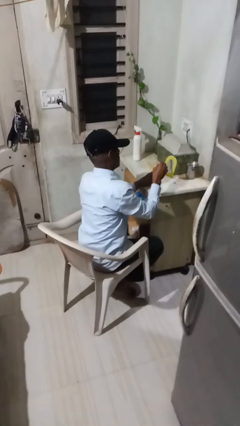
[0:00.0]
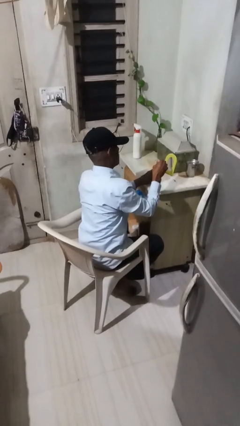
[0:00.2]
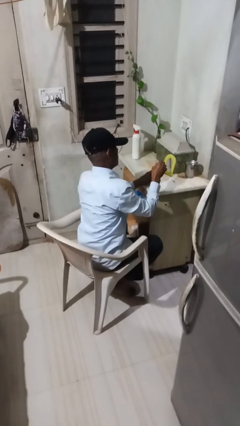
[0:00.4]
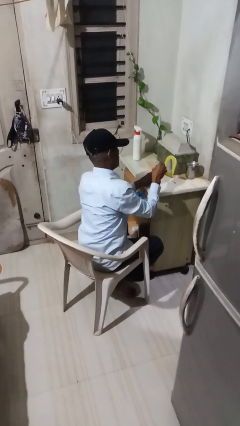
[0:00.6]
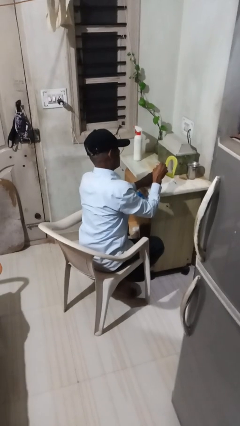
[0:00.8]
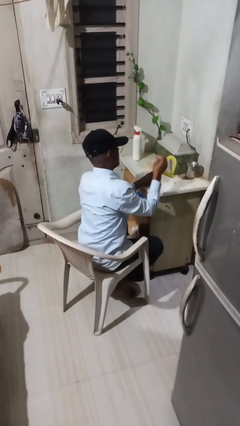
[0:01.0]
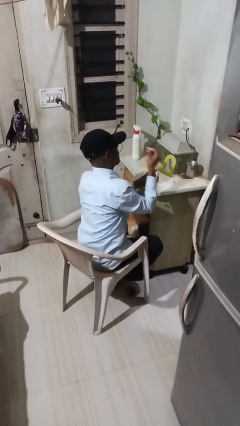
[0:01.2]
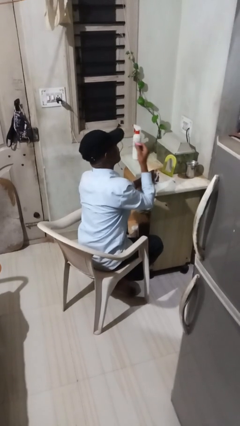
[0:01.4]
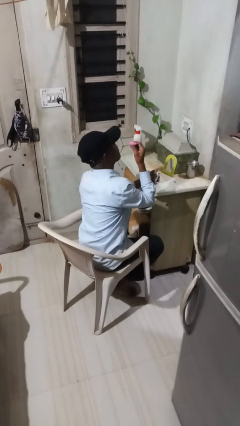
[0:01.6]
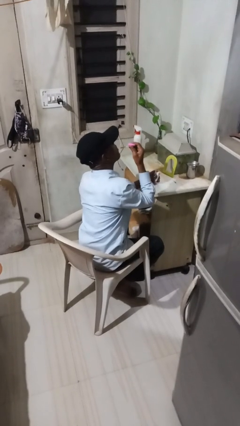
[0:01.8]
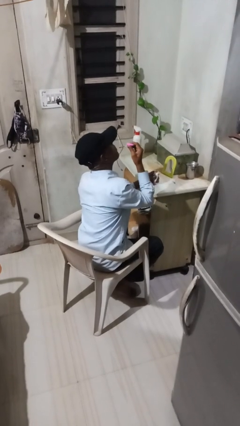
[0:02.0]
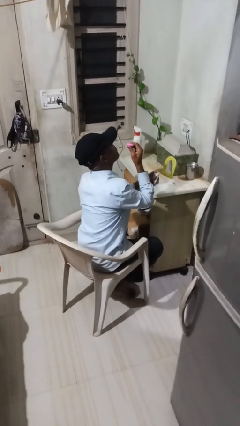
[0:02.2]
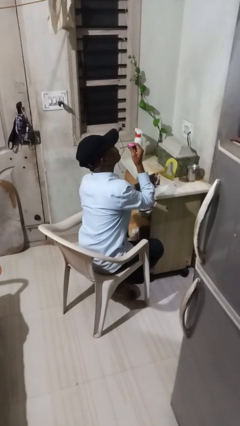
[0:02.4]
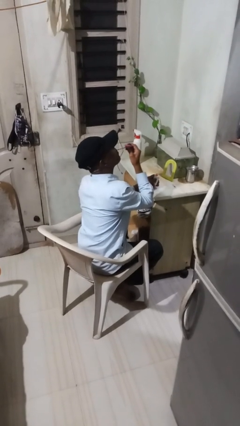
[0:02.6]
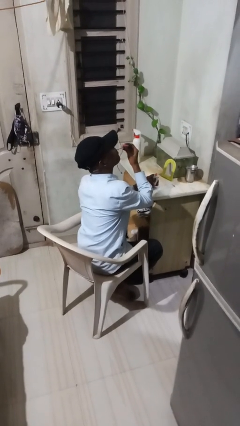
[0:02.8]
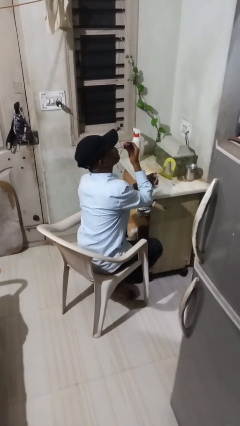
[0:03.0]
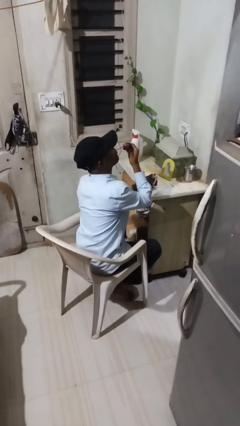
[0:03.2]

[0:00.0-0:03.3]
person applies lip makeup

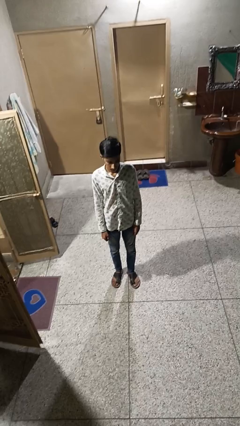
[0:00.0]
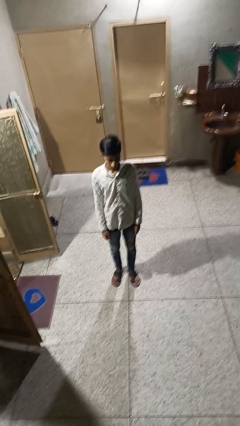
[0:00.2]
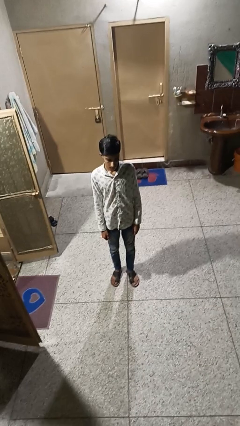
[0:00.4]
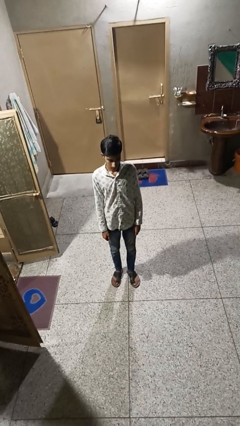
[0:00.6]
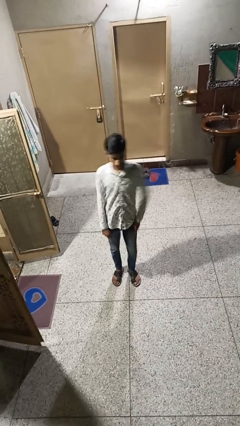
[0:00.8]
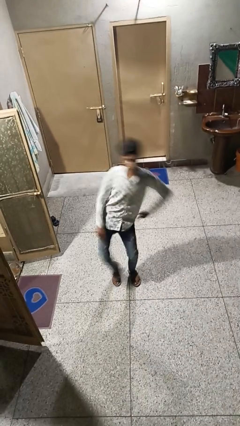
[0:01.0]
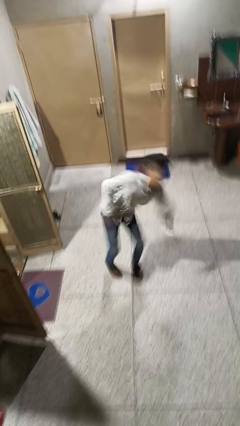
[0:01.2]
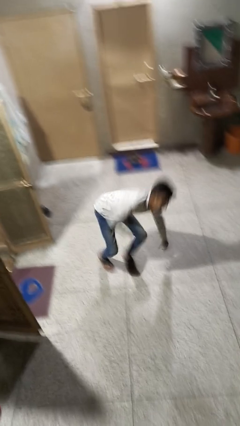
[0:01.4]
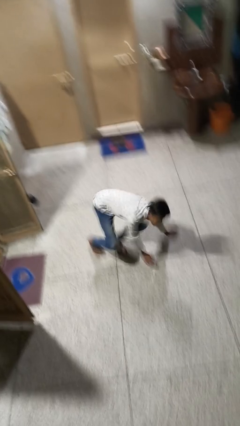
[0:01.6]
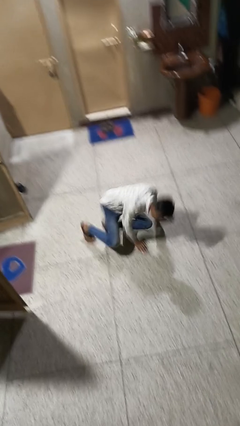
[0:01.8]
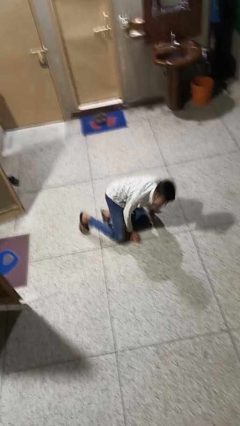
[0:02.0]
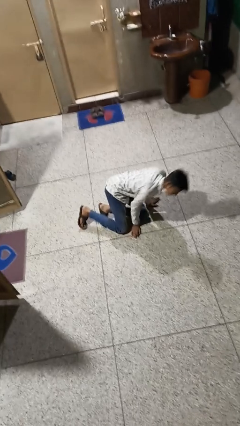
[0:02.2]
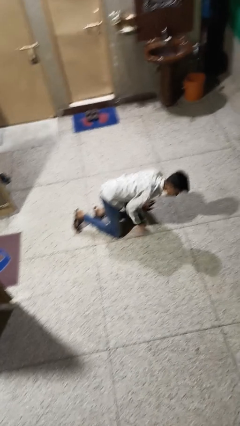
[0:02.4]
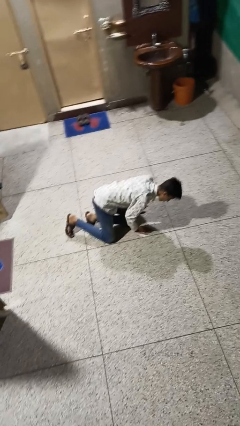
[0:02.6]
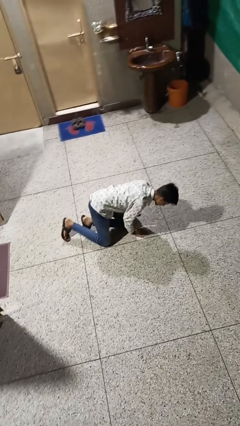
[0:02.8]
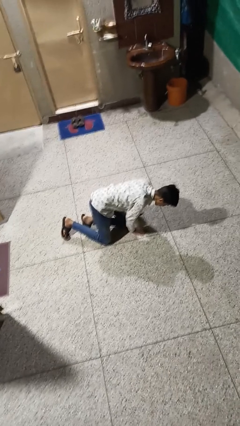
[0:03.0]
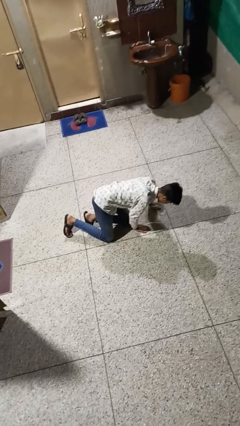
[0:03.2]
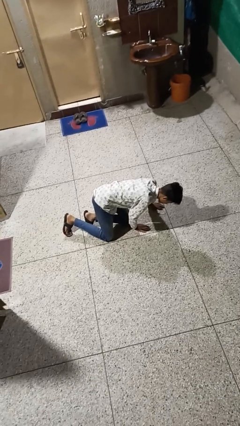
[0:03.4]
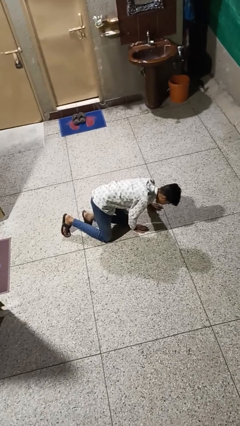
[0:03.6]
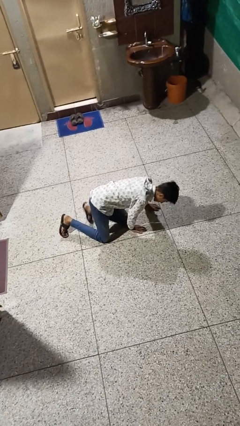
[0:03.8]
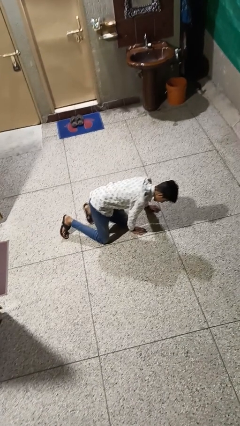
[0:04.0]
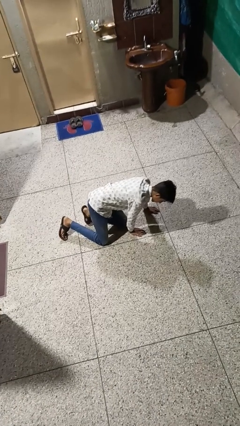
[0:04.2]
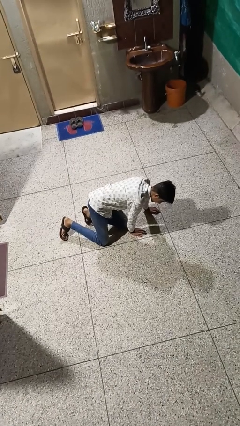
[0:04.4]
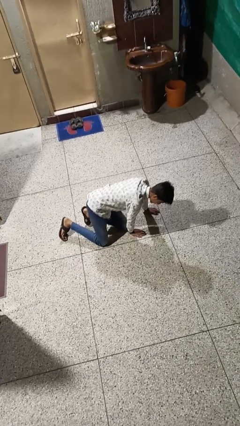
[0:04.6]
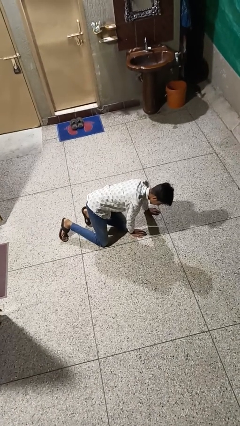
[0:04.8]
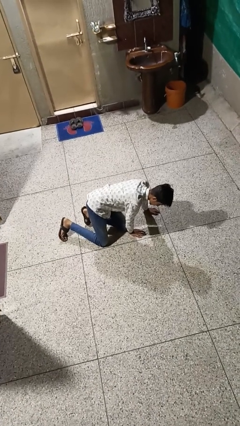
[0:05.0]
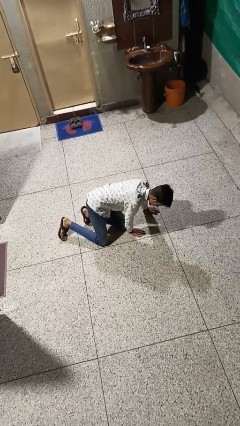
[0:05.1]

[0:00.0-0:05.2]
person falls while standing

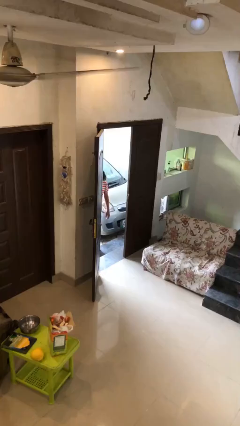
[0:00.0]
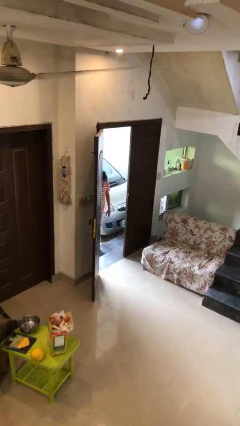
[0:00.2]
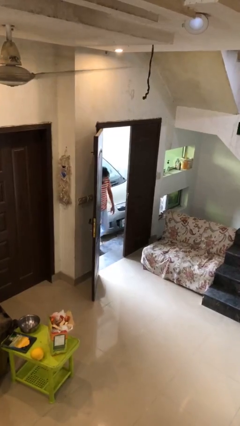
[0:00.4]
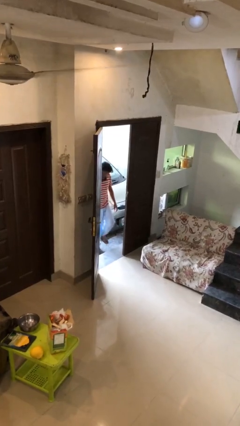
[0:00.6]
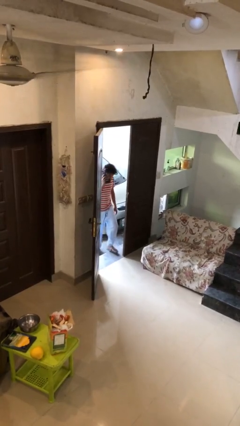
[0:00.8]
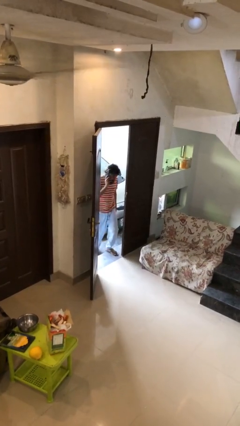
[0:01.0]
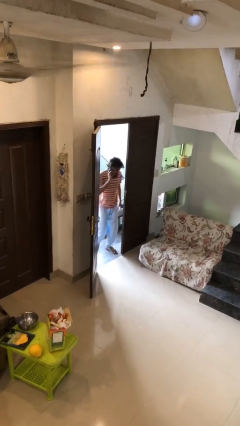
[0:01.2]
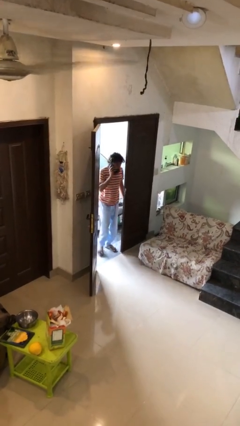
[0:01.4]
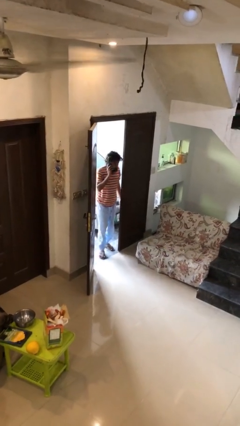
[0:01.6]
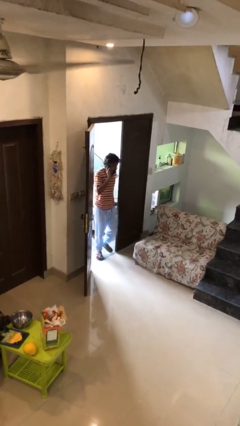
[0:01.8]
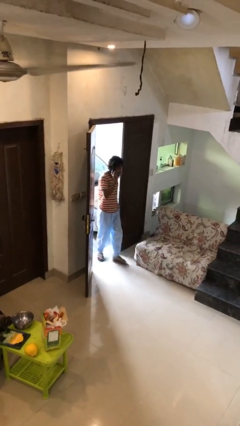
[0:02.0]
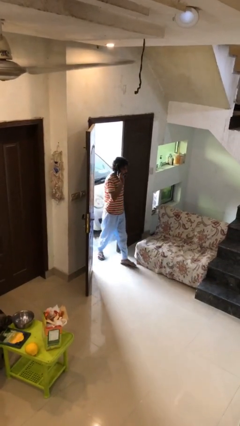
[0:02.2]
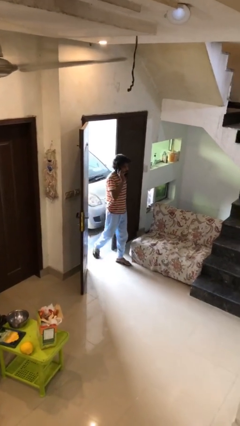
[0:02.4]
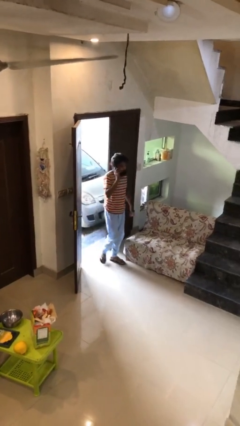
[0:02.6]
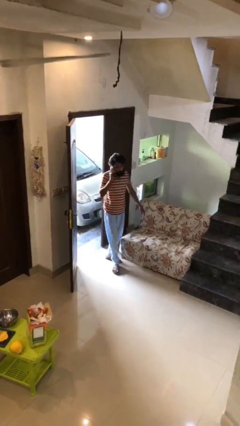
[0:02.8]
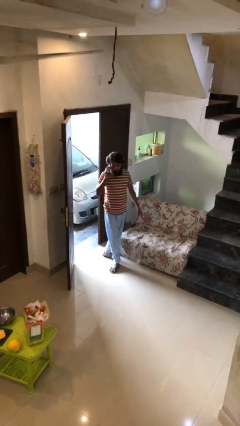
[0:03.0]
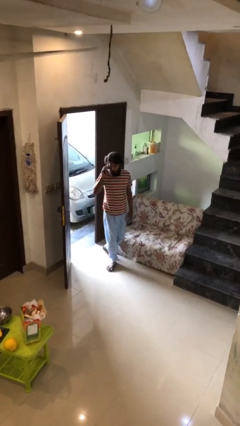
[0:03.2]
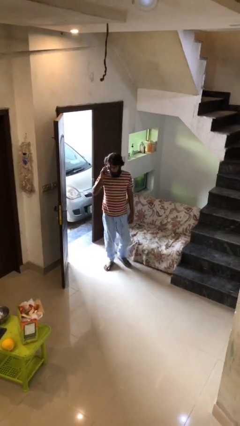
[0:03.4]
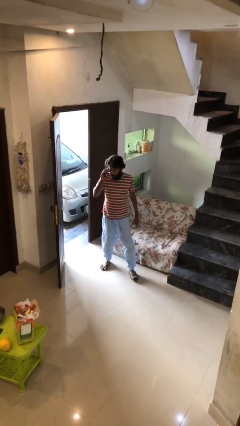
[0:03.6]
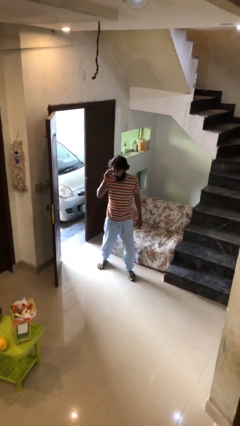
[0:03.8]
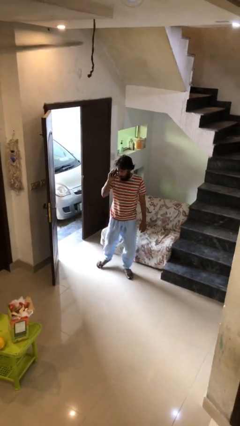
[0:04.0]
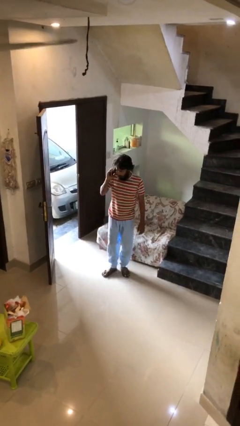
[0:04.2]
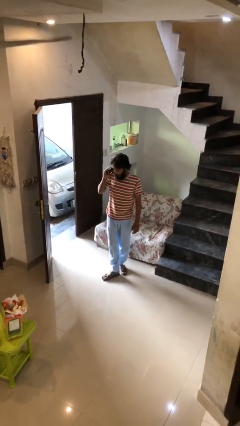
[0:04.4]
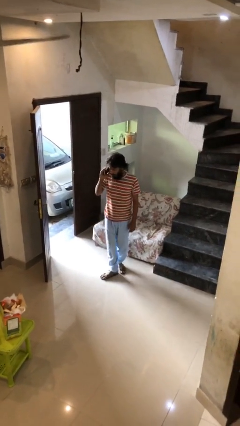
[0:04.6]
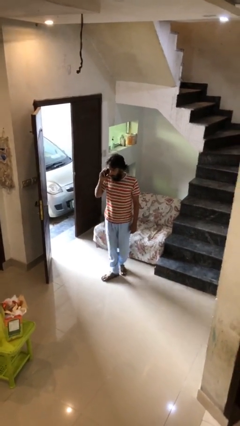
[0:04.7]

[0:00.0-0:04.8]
person enters scene through structure

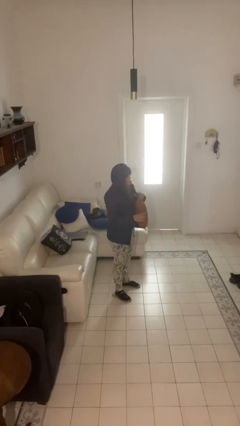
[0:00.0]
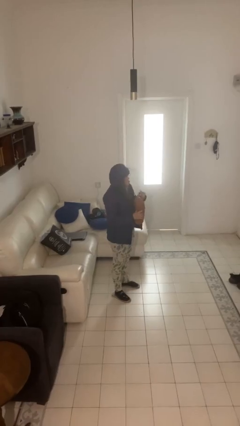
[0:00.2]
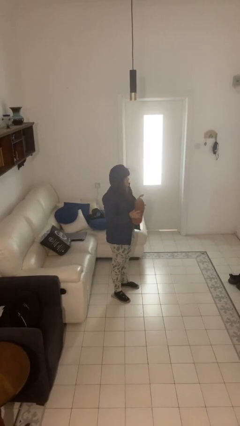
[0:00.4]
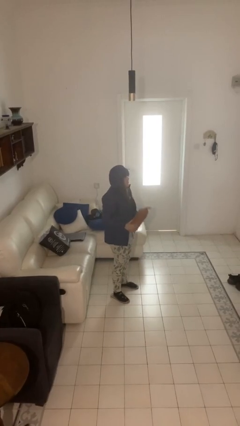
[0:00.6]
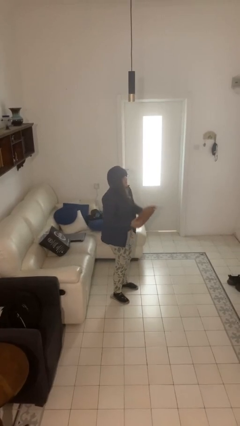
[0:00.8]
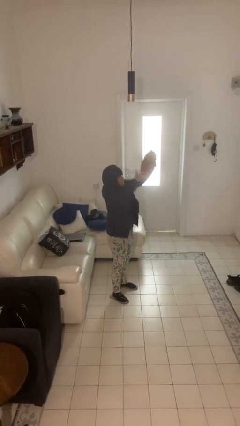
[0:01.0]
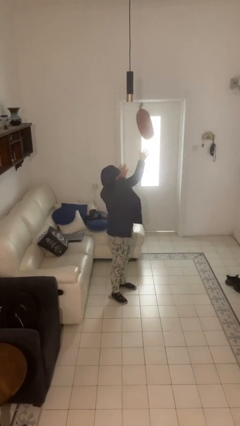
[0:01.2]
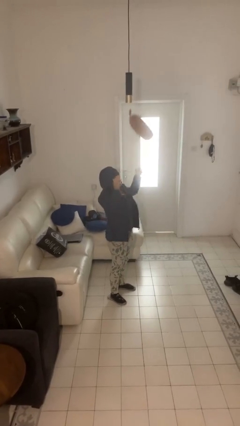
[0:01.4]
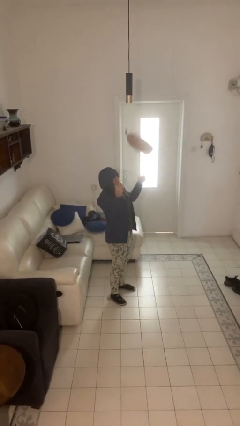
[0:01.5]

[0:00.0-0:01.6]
person drops object

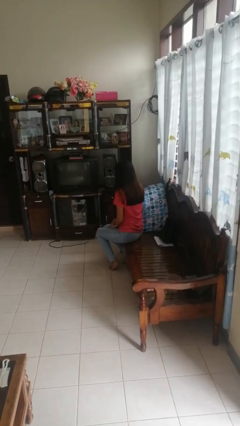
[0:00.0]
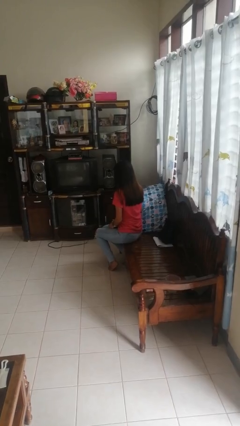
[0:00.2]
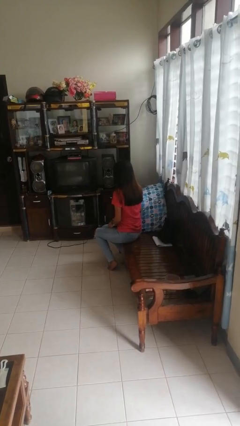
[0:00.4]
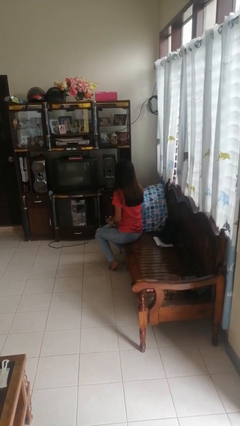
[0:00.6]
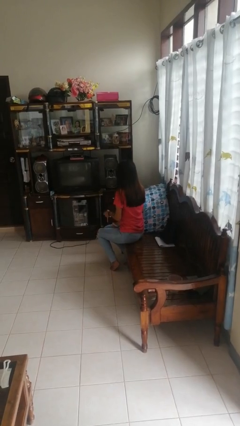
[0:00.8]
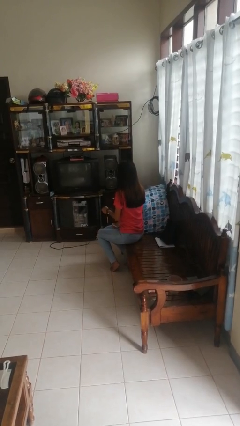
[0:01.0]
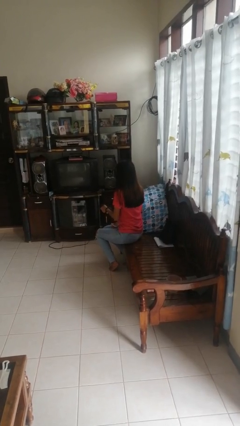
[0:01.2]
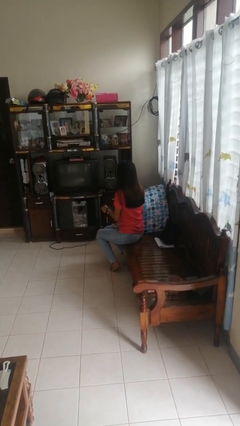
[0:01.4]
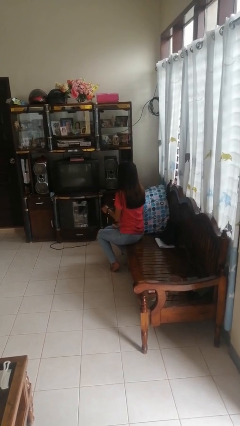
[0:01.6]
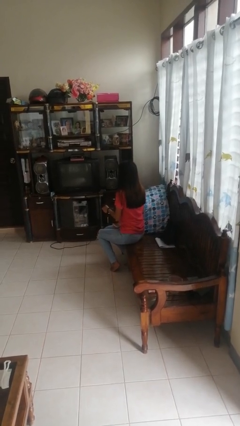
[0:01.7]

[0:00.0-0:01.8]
person uses television remote

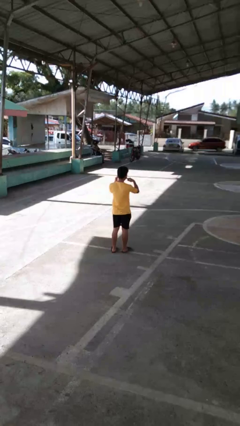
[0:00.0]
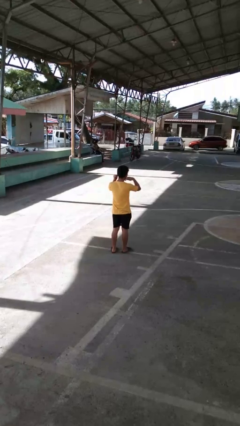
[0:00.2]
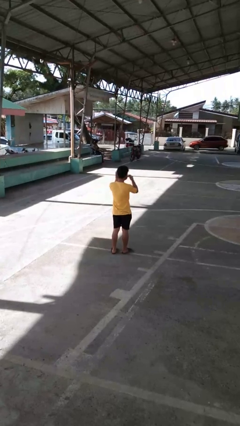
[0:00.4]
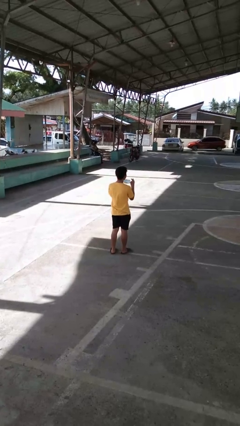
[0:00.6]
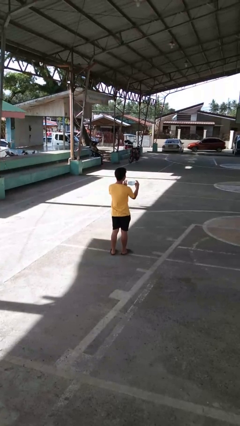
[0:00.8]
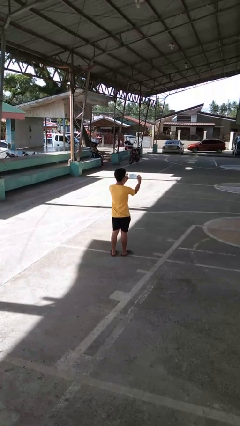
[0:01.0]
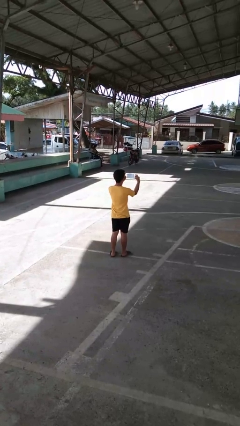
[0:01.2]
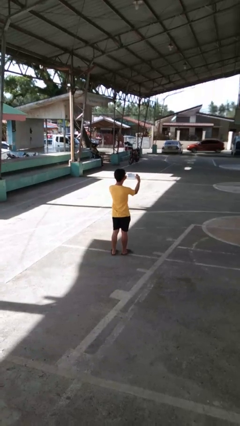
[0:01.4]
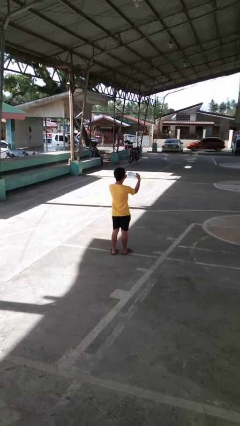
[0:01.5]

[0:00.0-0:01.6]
person takes off facemask
